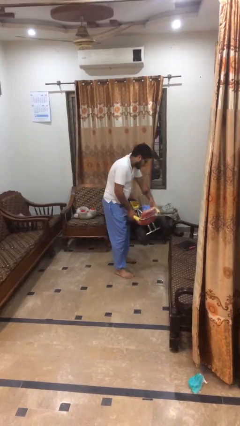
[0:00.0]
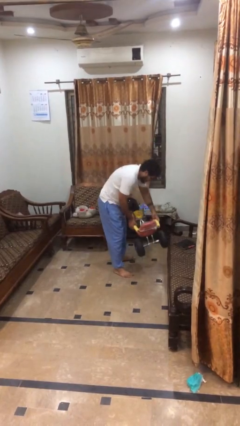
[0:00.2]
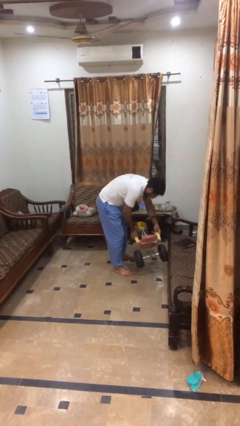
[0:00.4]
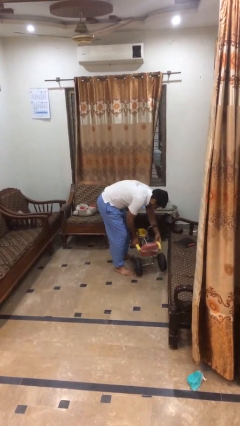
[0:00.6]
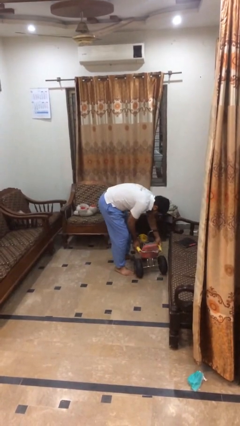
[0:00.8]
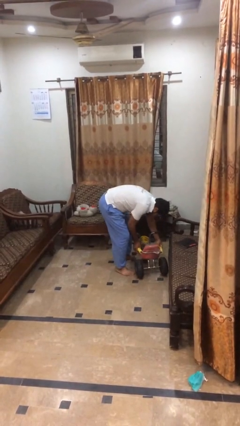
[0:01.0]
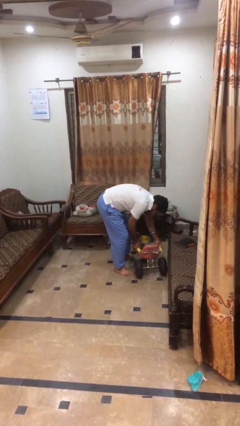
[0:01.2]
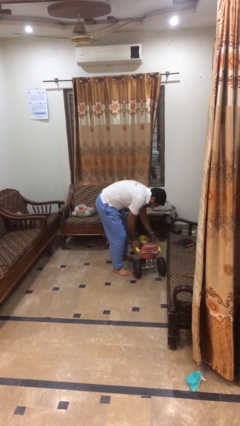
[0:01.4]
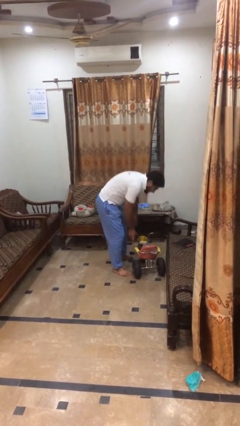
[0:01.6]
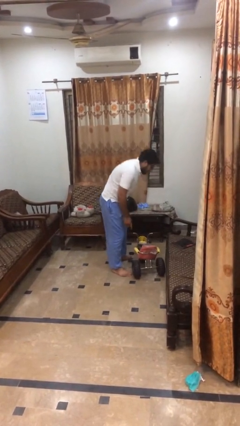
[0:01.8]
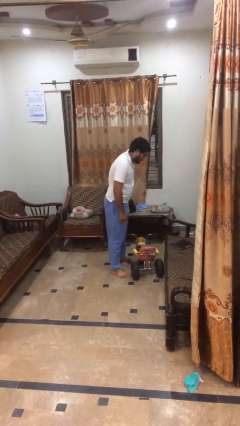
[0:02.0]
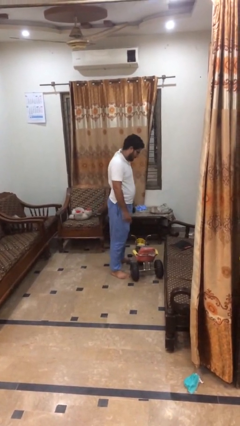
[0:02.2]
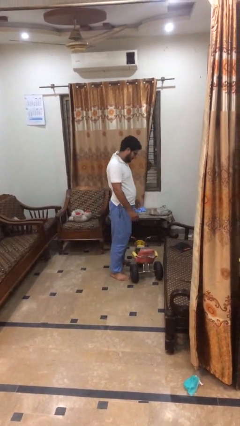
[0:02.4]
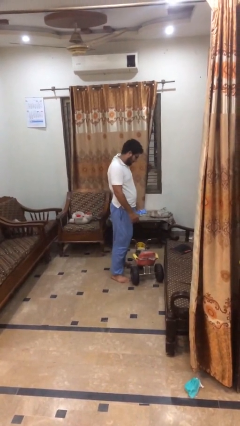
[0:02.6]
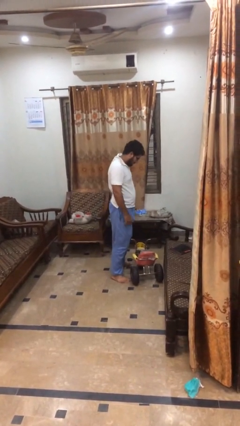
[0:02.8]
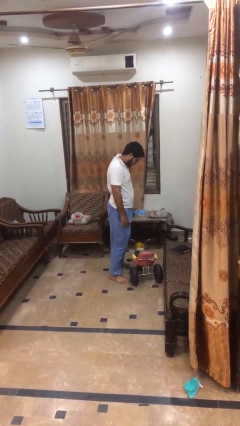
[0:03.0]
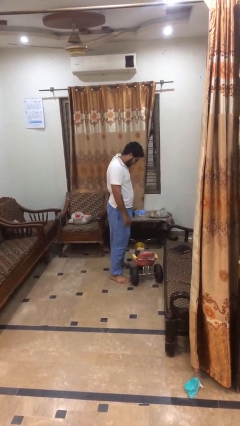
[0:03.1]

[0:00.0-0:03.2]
person puts down object on floor

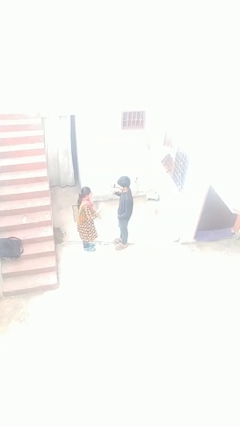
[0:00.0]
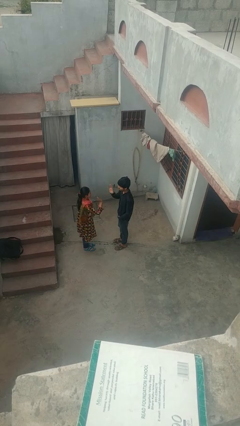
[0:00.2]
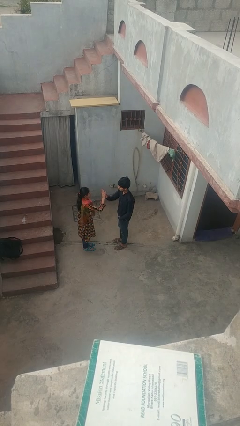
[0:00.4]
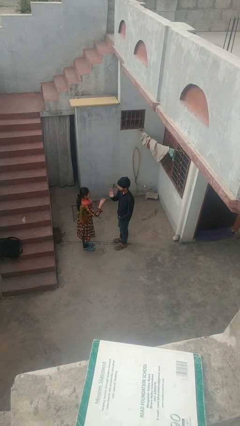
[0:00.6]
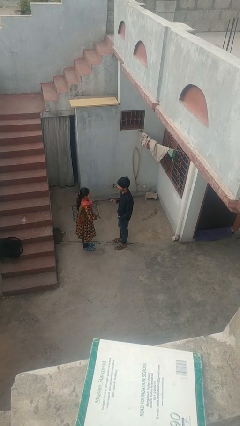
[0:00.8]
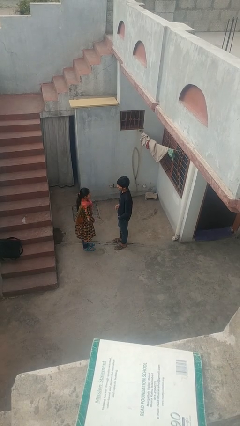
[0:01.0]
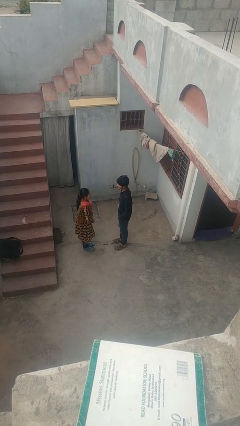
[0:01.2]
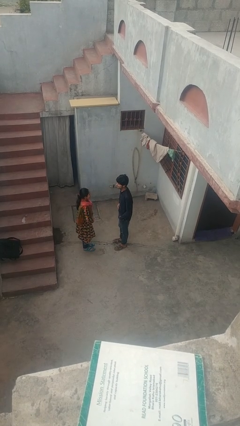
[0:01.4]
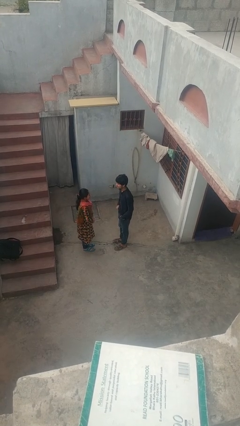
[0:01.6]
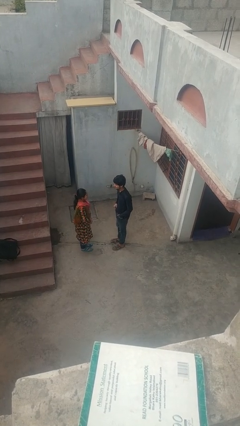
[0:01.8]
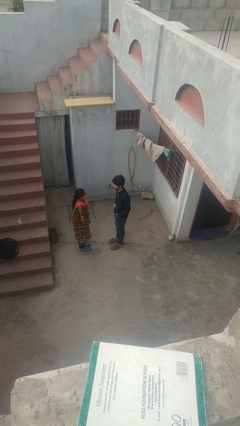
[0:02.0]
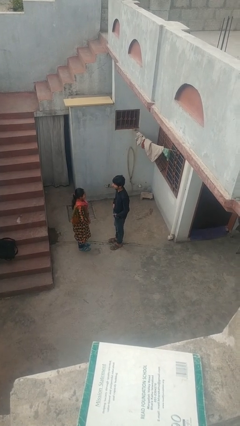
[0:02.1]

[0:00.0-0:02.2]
person highfives hand

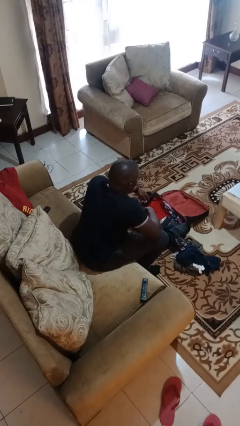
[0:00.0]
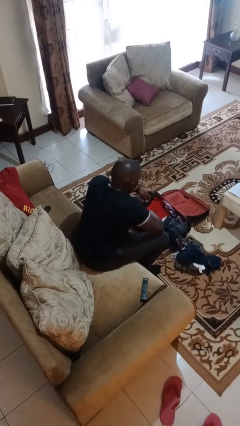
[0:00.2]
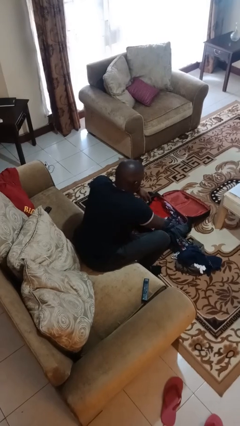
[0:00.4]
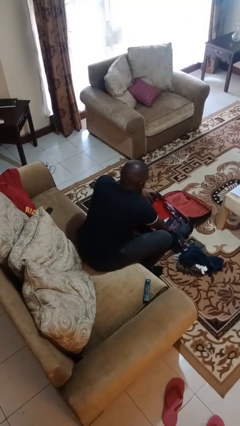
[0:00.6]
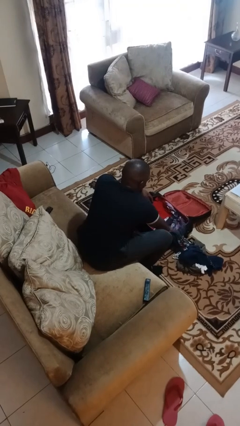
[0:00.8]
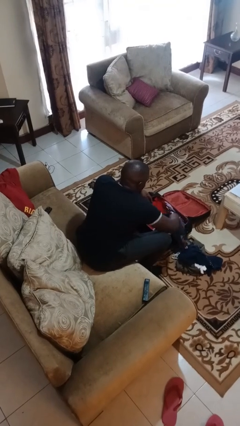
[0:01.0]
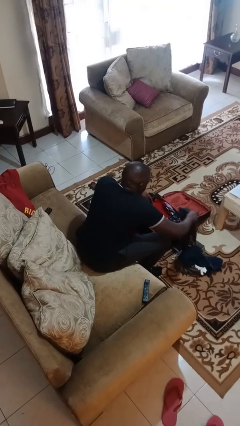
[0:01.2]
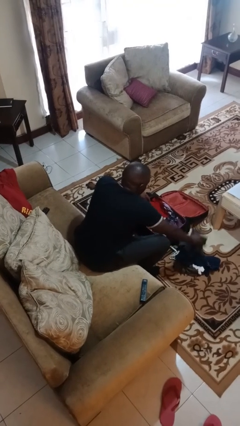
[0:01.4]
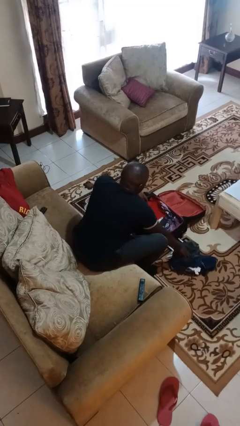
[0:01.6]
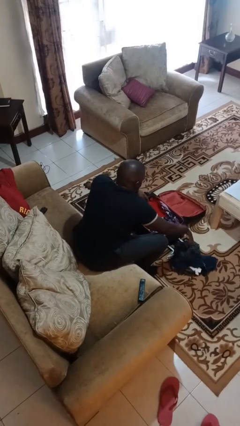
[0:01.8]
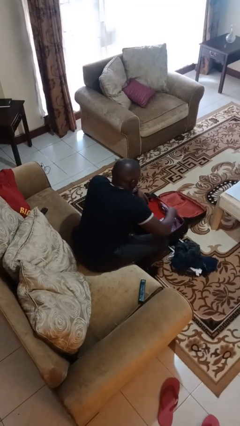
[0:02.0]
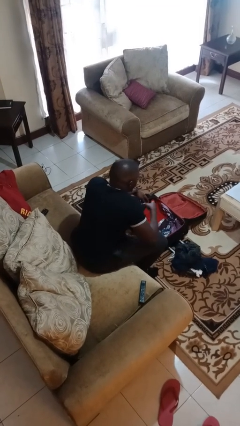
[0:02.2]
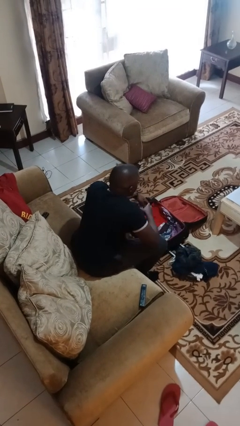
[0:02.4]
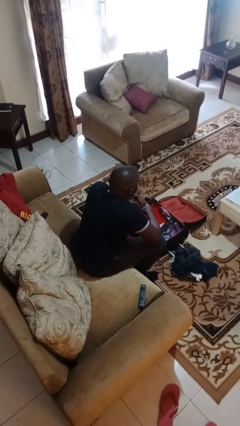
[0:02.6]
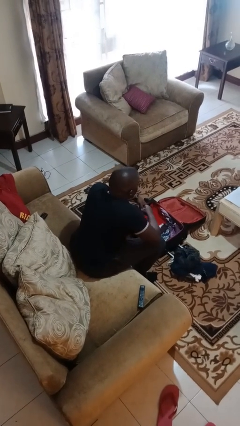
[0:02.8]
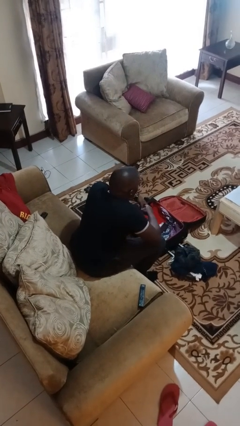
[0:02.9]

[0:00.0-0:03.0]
person unloads clothes from suitcase

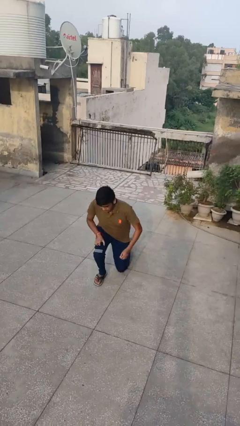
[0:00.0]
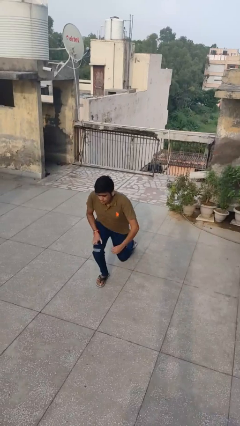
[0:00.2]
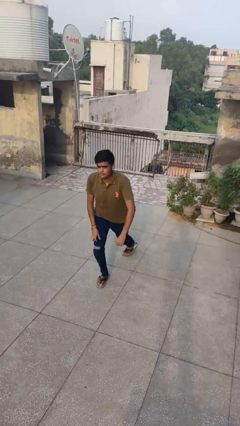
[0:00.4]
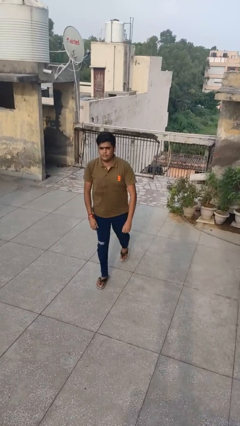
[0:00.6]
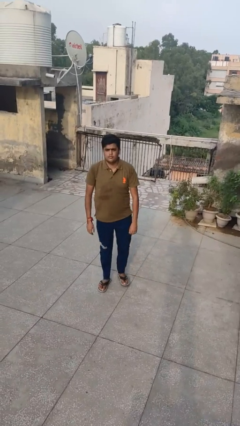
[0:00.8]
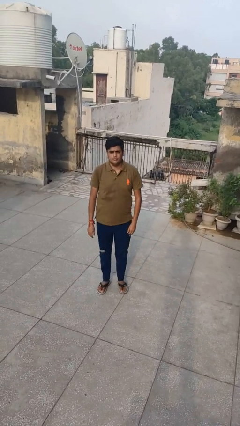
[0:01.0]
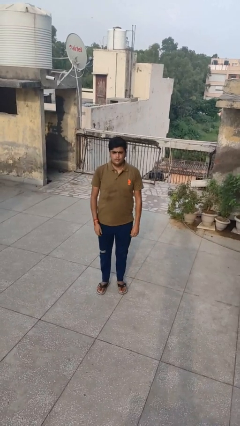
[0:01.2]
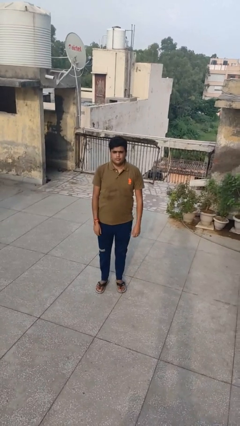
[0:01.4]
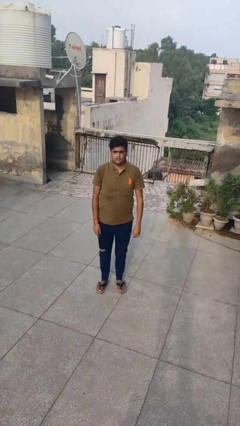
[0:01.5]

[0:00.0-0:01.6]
person stands up from floor

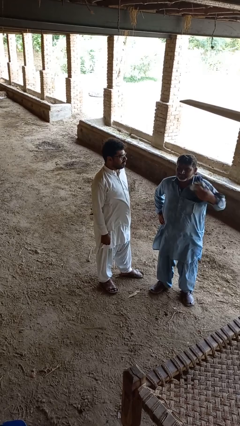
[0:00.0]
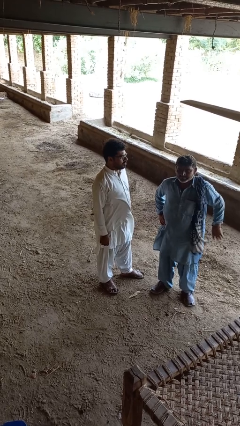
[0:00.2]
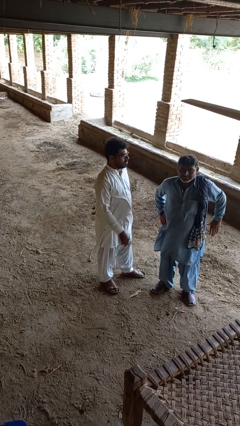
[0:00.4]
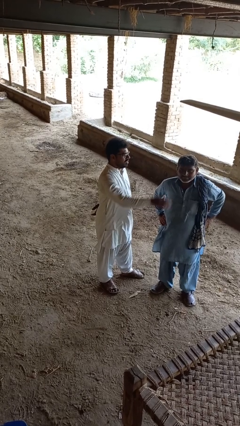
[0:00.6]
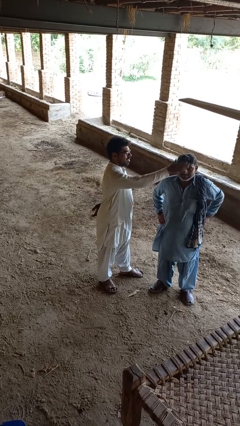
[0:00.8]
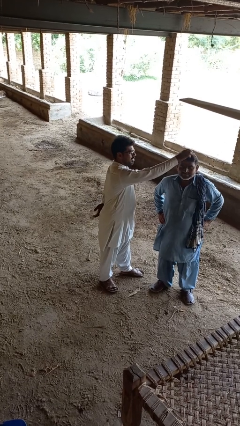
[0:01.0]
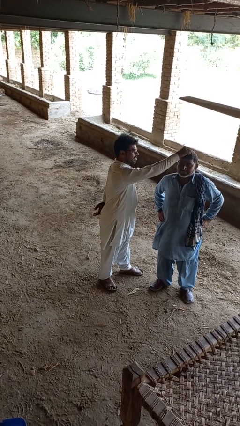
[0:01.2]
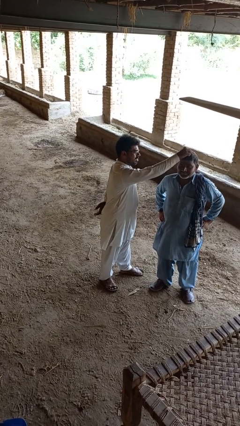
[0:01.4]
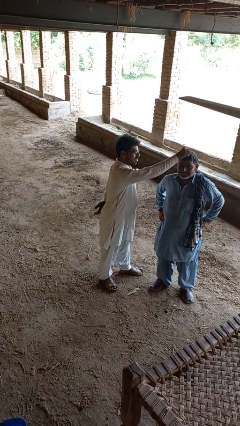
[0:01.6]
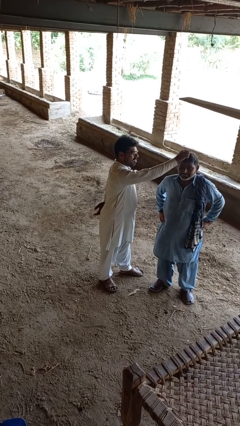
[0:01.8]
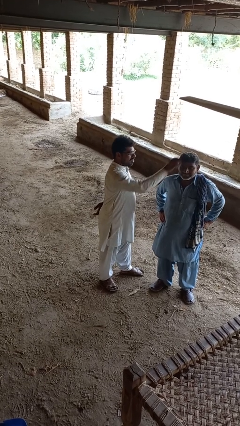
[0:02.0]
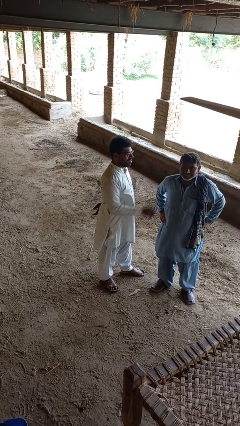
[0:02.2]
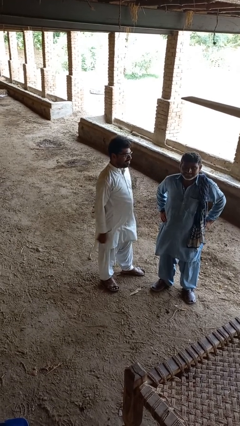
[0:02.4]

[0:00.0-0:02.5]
person grabs person by hair

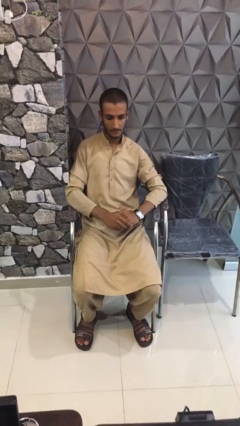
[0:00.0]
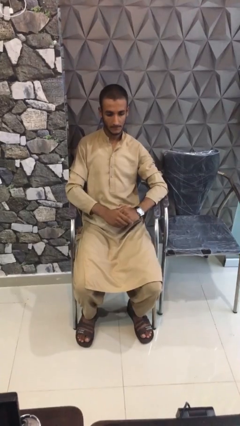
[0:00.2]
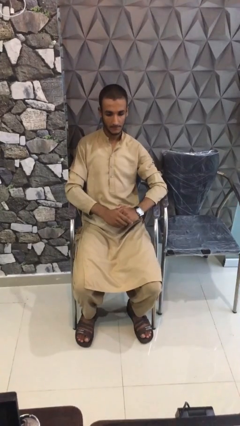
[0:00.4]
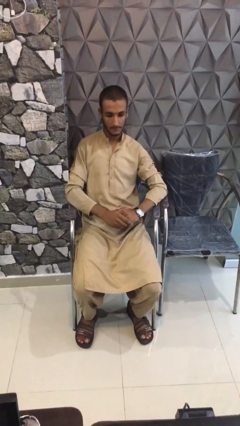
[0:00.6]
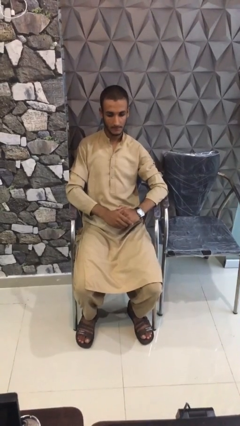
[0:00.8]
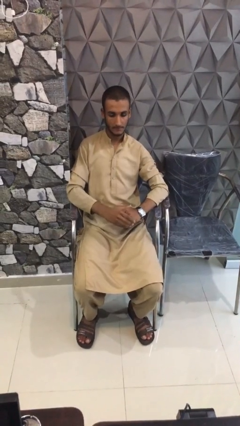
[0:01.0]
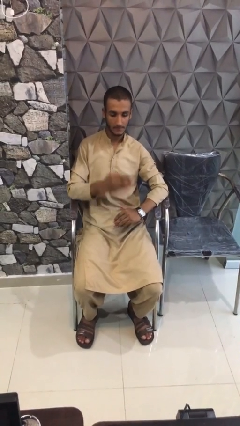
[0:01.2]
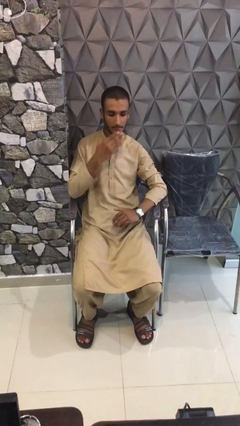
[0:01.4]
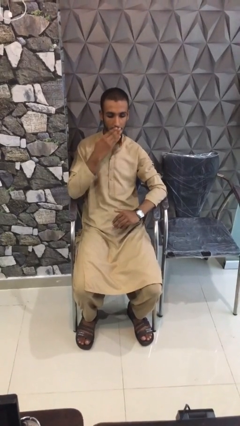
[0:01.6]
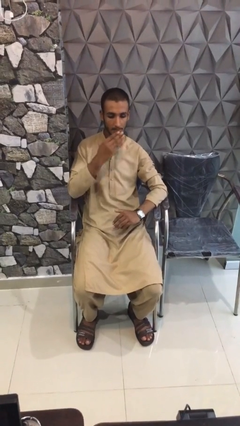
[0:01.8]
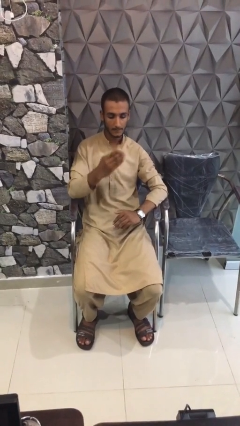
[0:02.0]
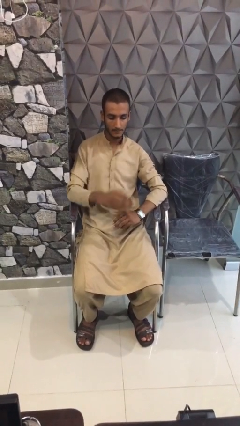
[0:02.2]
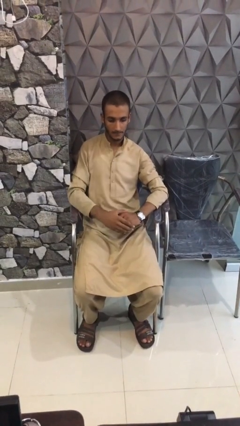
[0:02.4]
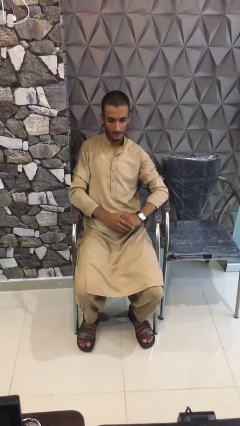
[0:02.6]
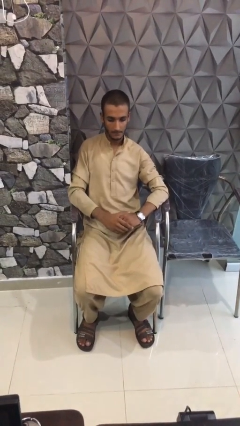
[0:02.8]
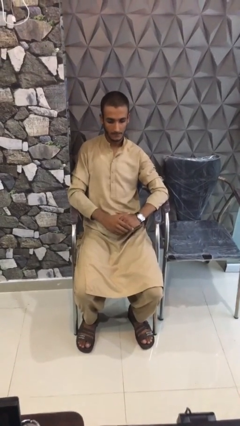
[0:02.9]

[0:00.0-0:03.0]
person gestures blow kiss

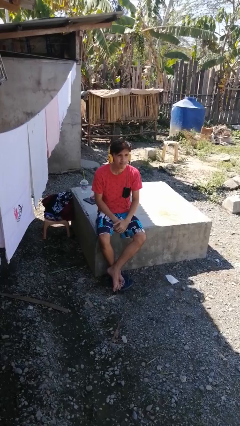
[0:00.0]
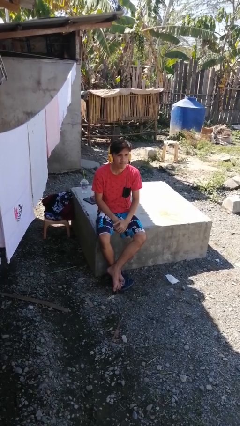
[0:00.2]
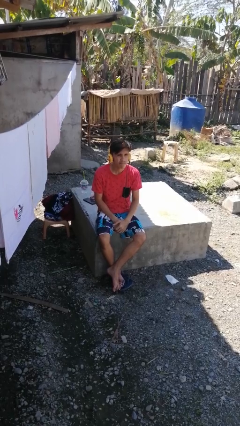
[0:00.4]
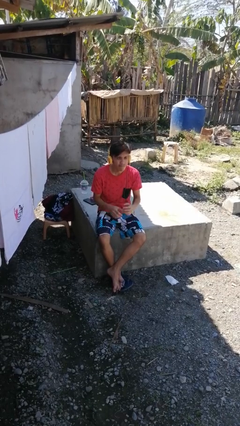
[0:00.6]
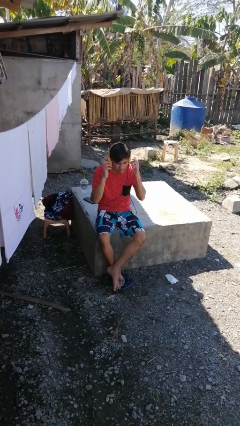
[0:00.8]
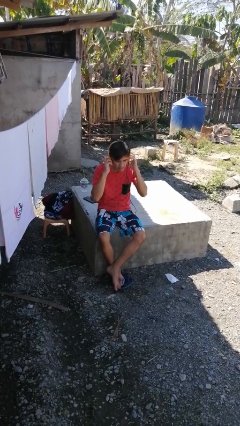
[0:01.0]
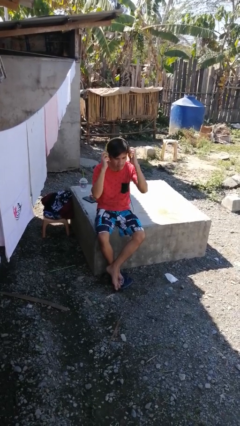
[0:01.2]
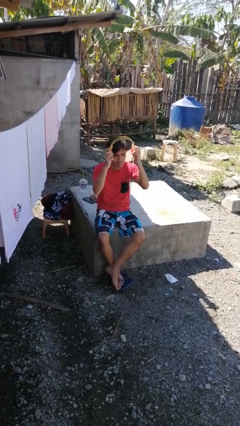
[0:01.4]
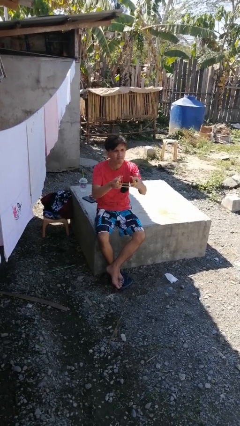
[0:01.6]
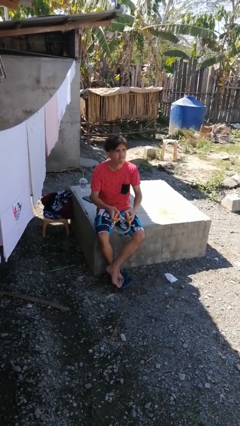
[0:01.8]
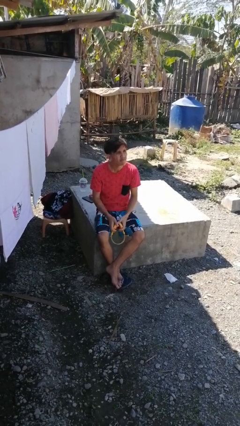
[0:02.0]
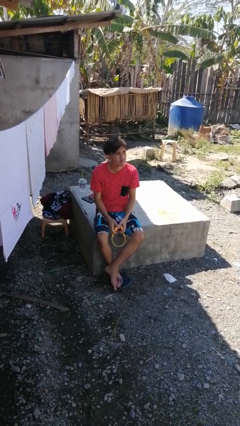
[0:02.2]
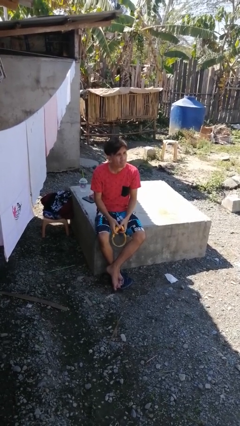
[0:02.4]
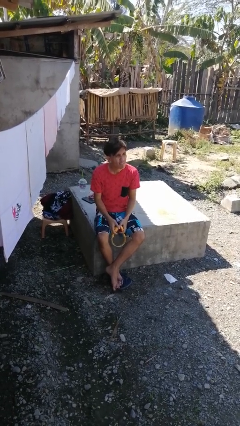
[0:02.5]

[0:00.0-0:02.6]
person takes off headphones
